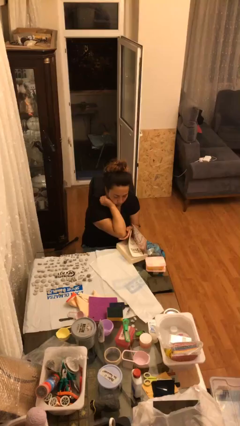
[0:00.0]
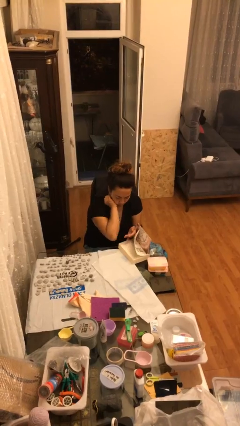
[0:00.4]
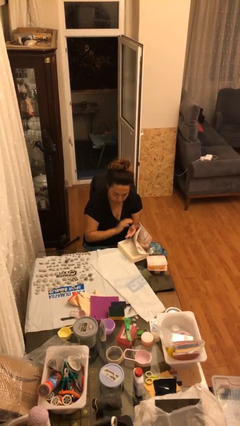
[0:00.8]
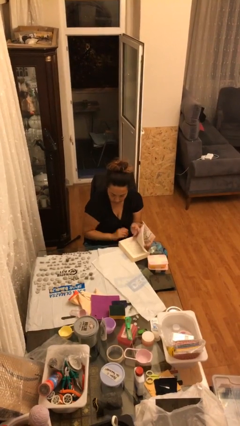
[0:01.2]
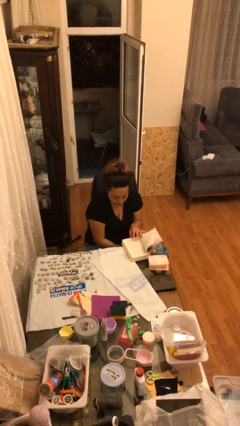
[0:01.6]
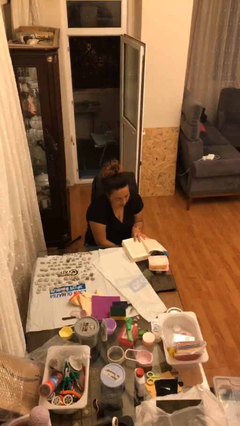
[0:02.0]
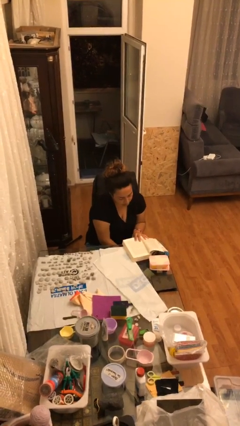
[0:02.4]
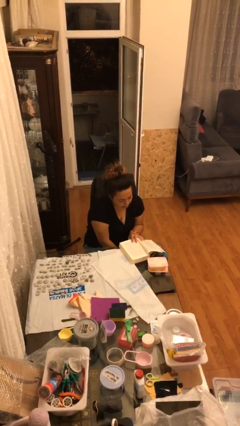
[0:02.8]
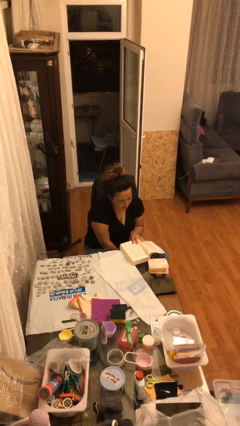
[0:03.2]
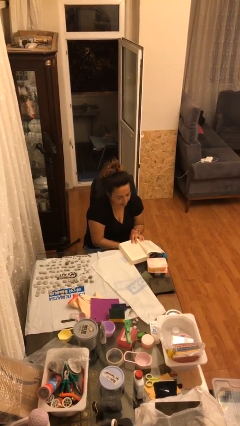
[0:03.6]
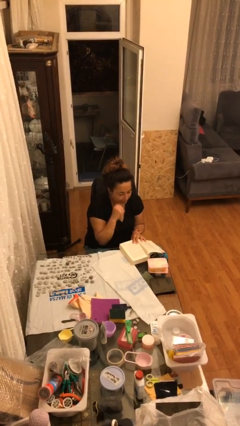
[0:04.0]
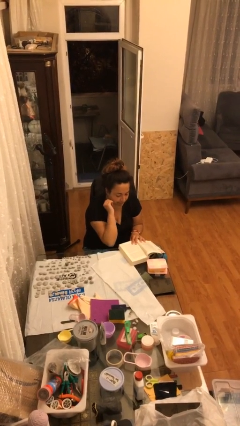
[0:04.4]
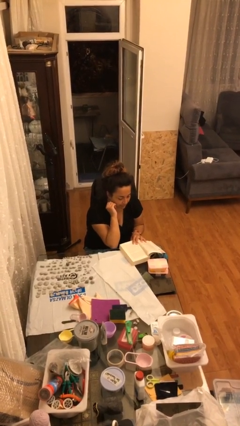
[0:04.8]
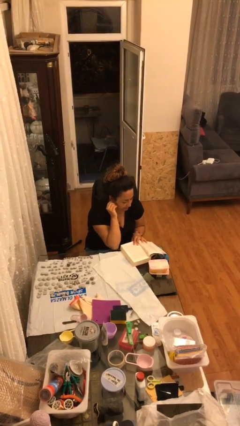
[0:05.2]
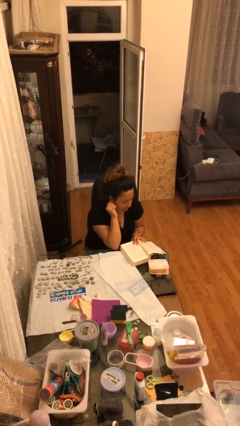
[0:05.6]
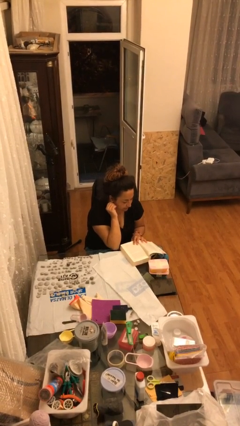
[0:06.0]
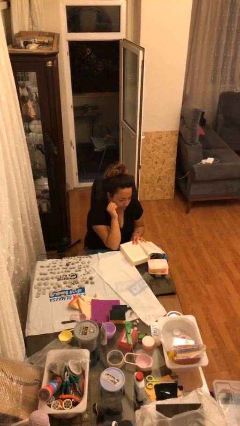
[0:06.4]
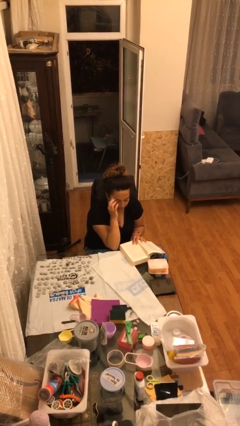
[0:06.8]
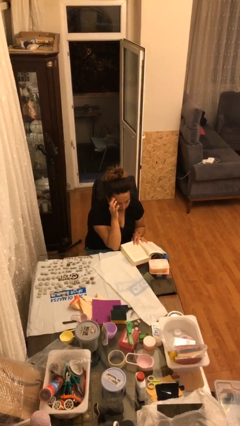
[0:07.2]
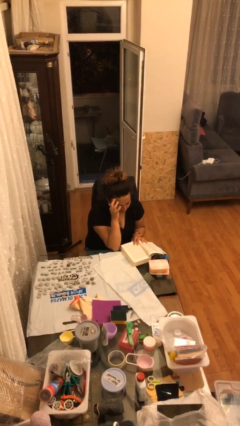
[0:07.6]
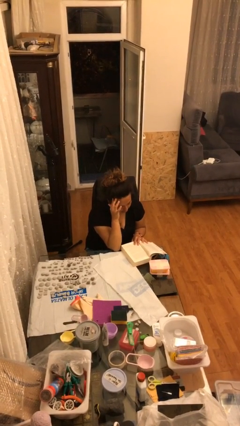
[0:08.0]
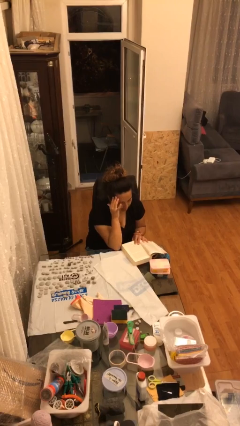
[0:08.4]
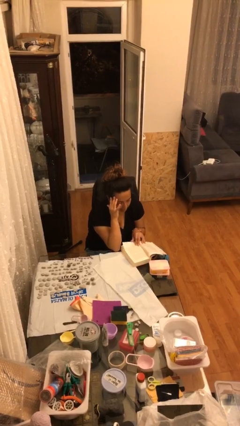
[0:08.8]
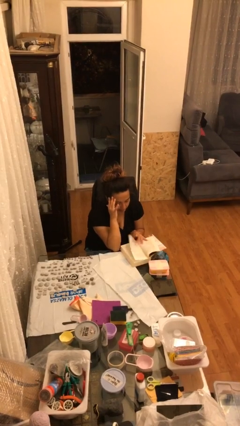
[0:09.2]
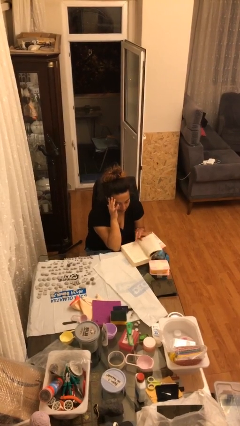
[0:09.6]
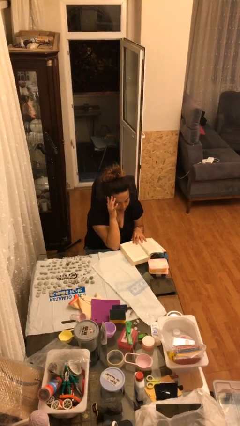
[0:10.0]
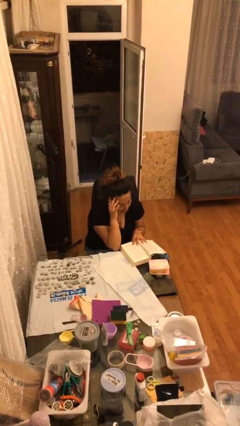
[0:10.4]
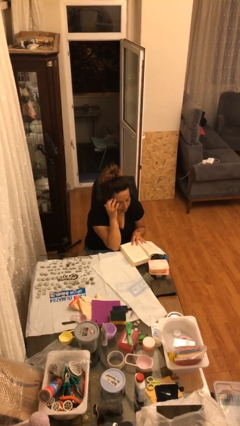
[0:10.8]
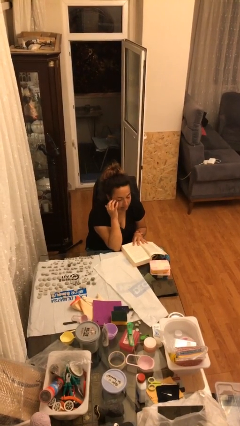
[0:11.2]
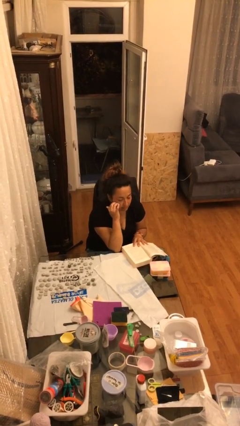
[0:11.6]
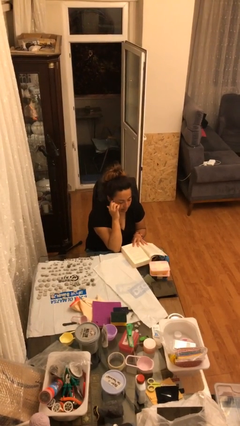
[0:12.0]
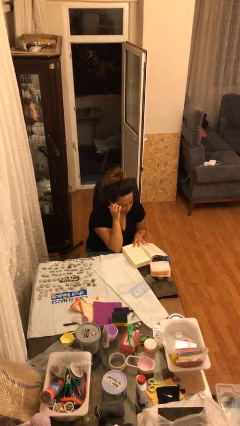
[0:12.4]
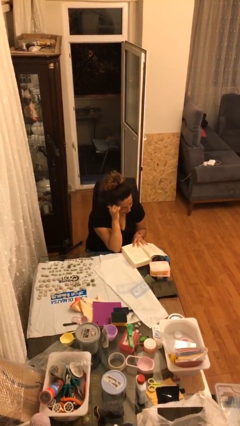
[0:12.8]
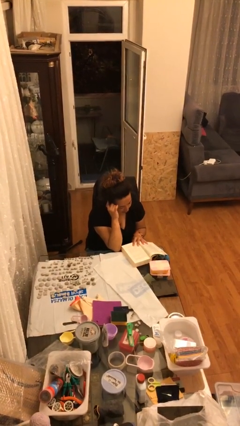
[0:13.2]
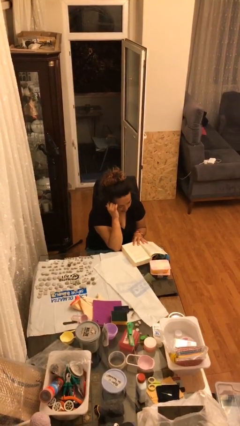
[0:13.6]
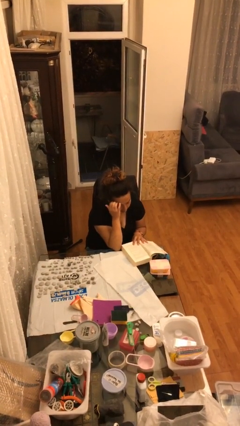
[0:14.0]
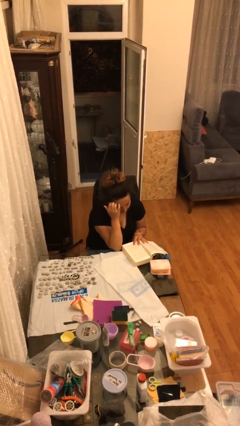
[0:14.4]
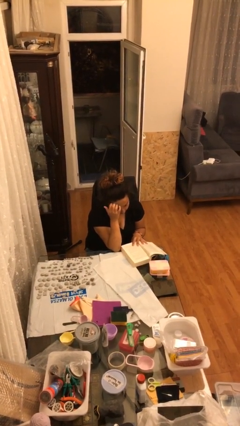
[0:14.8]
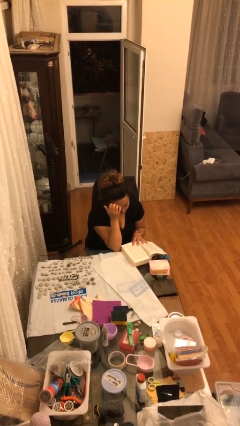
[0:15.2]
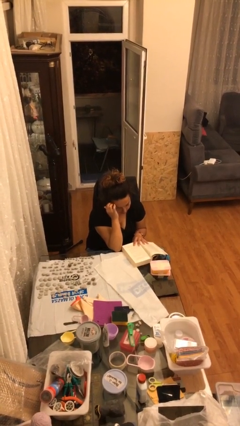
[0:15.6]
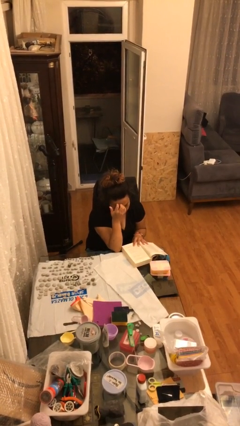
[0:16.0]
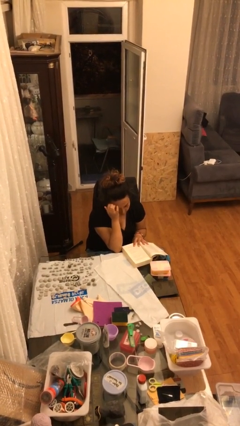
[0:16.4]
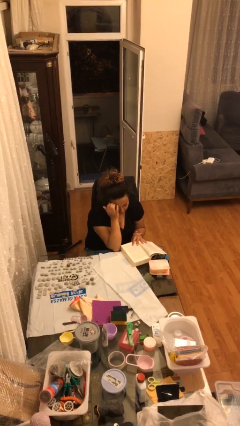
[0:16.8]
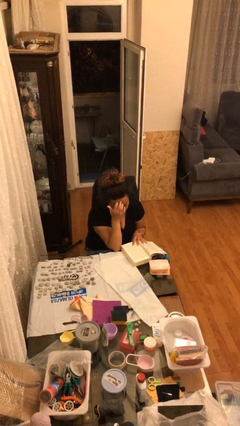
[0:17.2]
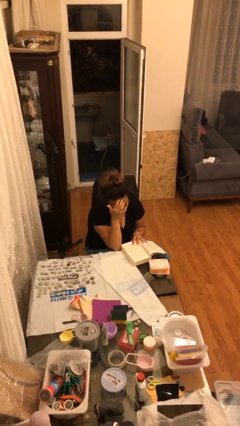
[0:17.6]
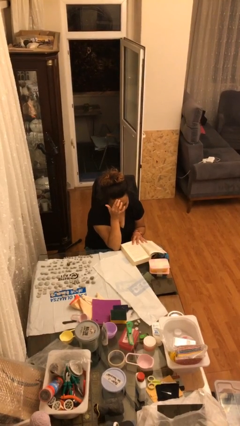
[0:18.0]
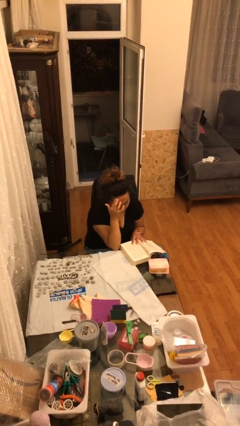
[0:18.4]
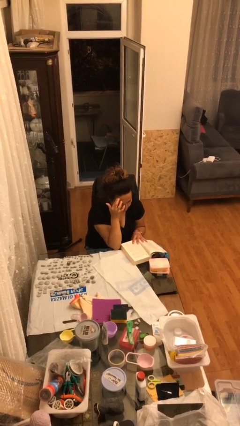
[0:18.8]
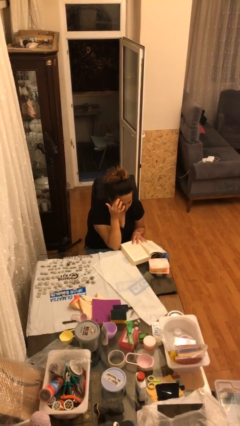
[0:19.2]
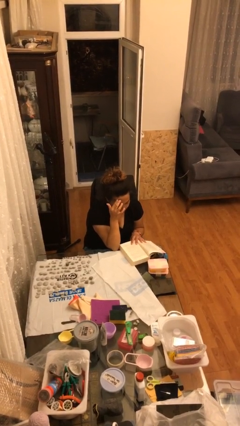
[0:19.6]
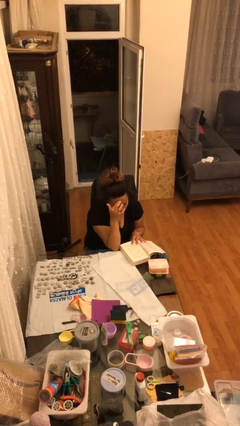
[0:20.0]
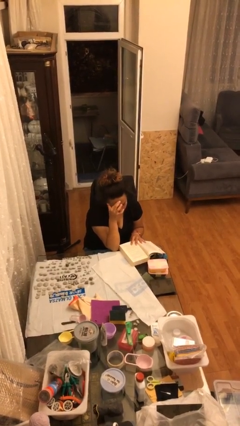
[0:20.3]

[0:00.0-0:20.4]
person reads document

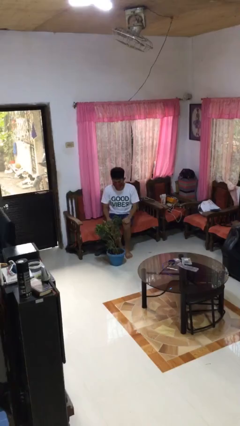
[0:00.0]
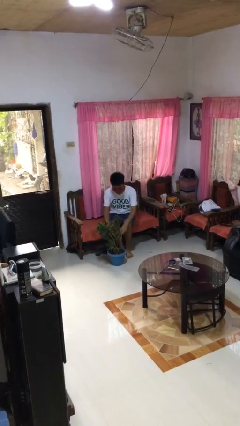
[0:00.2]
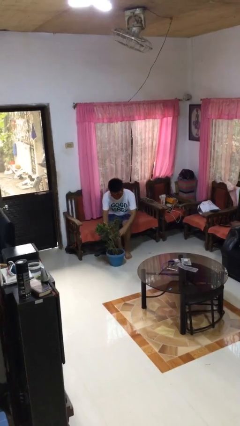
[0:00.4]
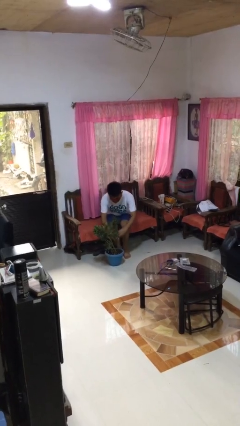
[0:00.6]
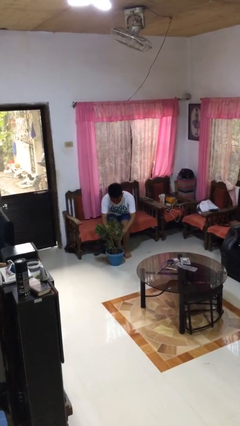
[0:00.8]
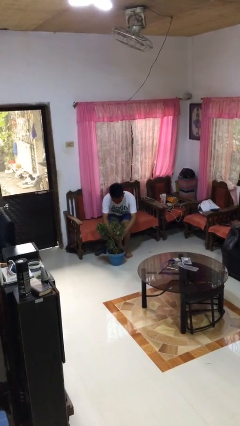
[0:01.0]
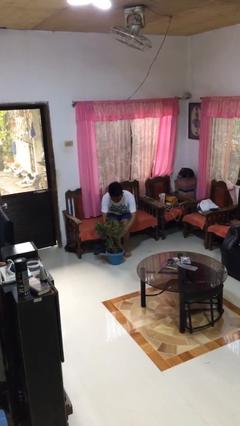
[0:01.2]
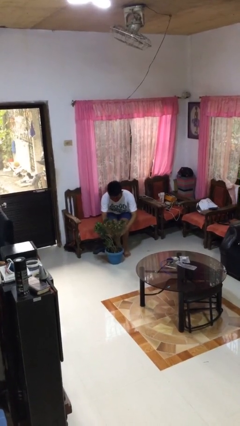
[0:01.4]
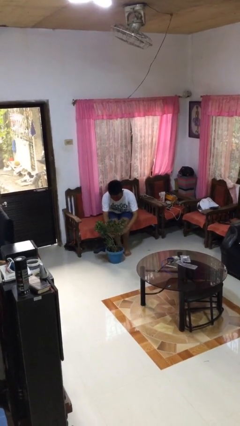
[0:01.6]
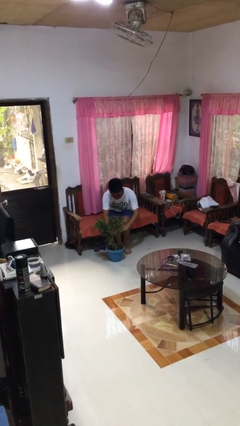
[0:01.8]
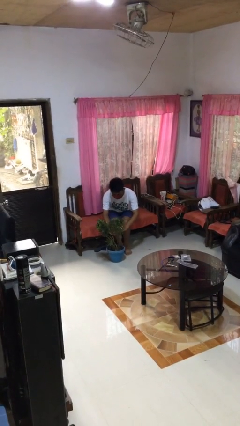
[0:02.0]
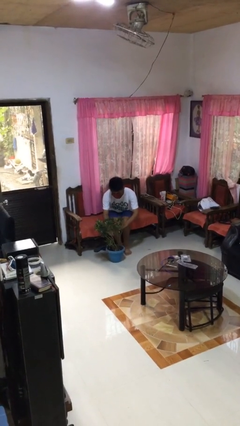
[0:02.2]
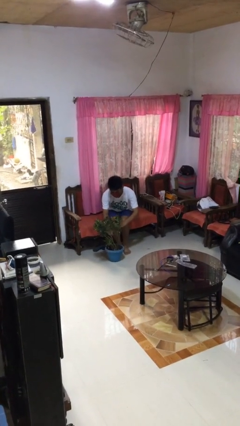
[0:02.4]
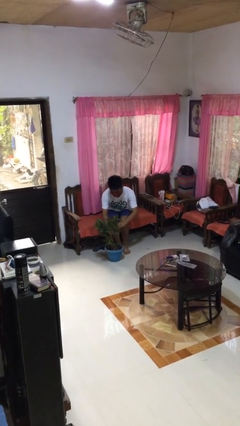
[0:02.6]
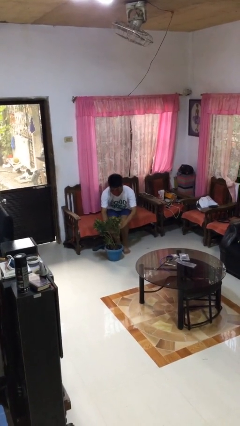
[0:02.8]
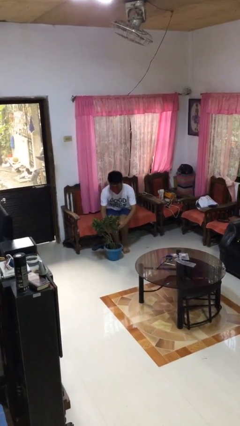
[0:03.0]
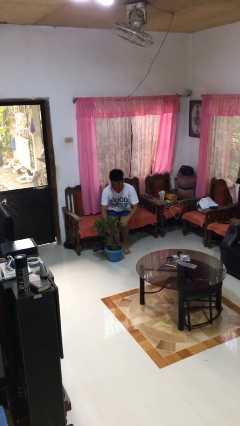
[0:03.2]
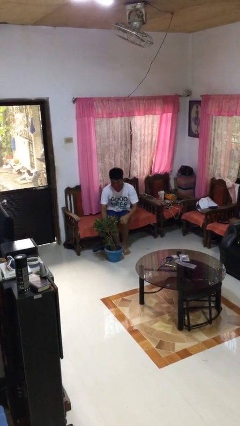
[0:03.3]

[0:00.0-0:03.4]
person arranges flowers in vase

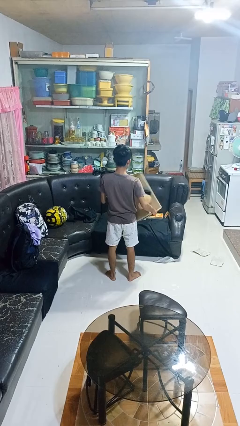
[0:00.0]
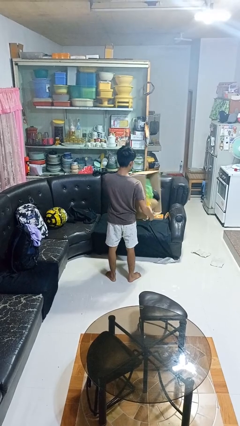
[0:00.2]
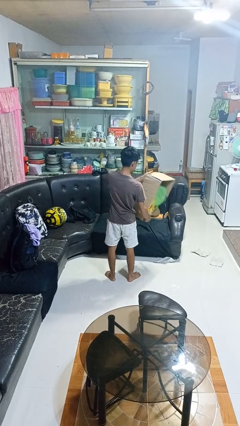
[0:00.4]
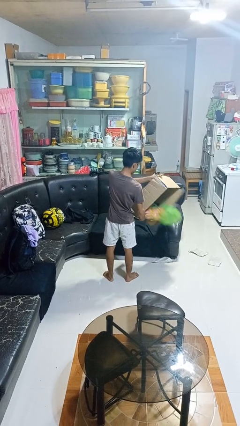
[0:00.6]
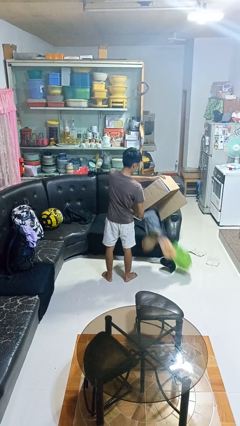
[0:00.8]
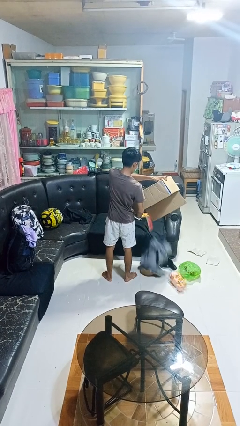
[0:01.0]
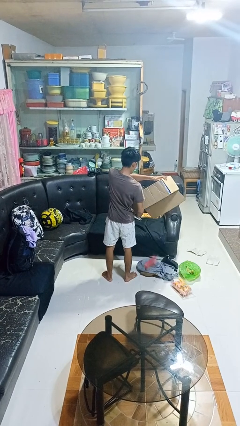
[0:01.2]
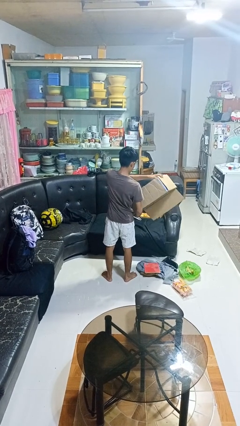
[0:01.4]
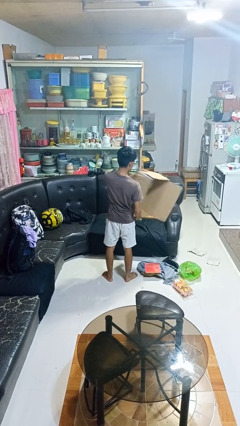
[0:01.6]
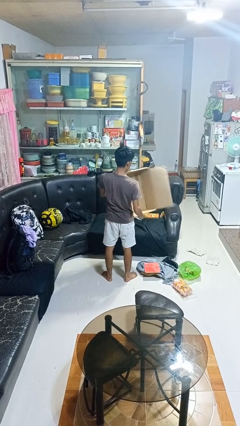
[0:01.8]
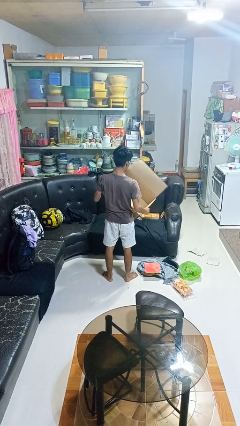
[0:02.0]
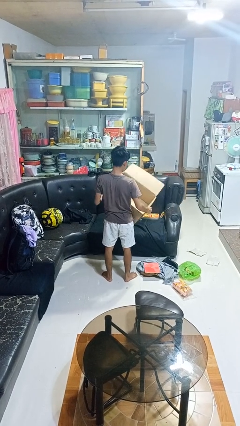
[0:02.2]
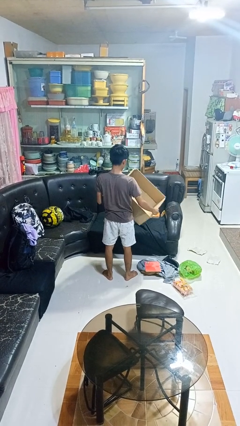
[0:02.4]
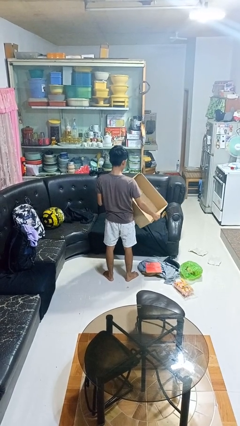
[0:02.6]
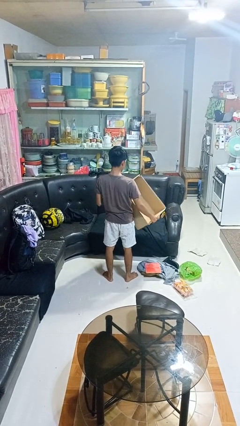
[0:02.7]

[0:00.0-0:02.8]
person unloads box onto floor

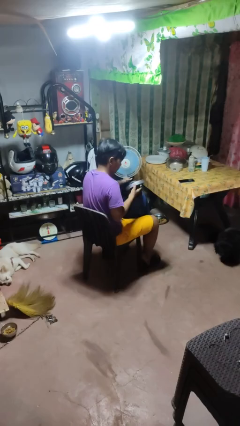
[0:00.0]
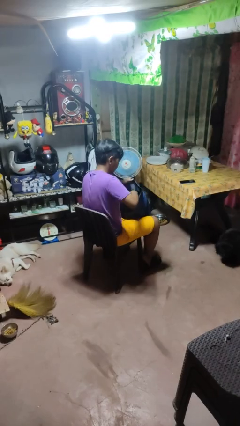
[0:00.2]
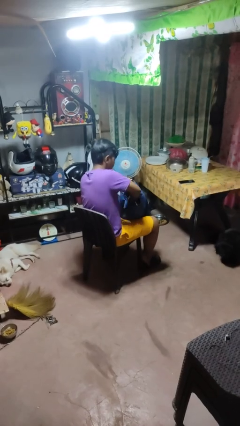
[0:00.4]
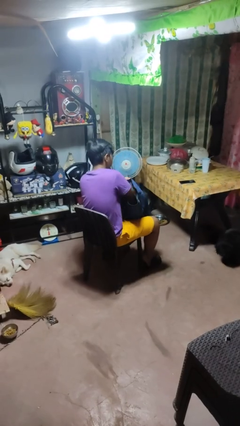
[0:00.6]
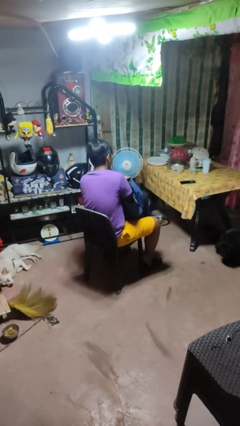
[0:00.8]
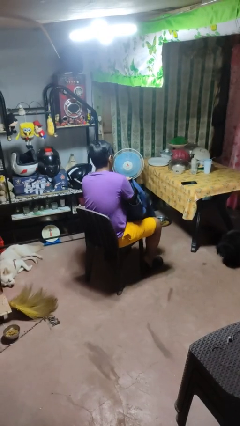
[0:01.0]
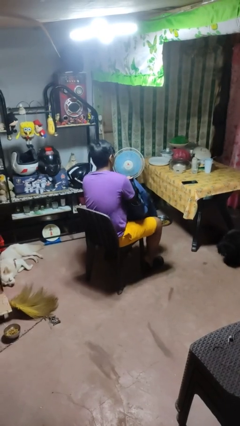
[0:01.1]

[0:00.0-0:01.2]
person puts object into backpack
